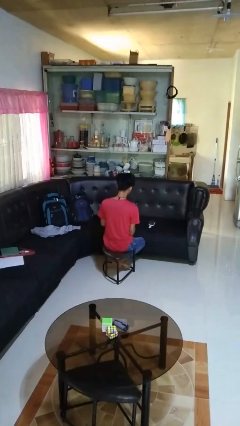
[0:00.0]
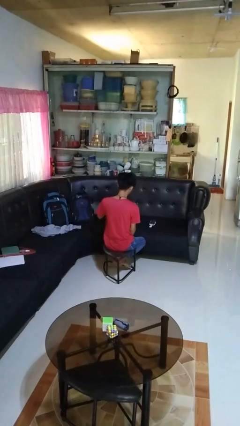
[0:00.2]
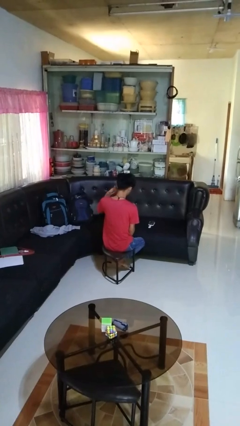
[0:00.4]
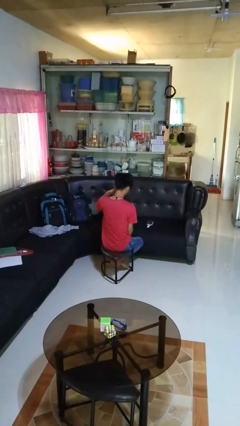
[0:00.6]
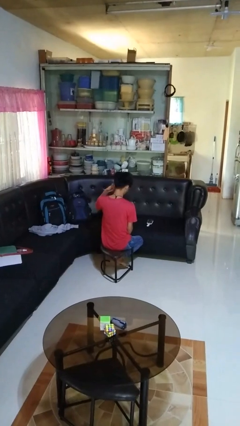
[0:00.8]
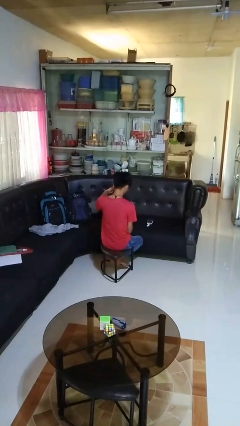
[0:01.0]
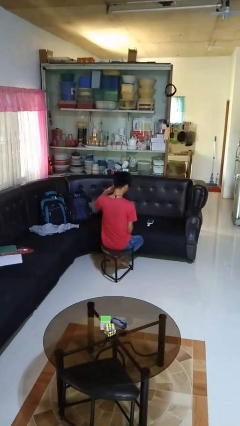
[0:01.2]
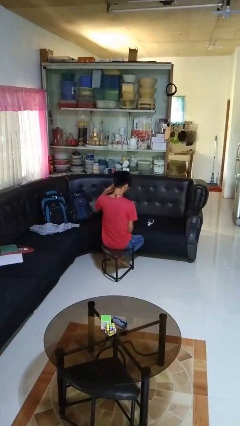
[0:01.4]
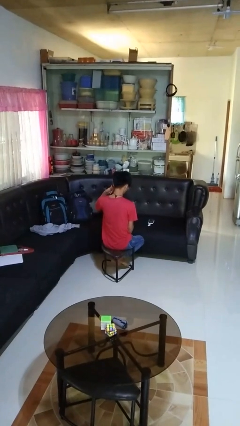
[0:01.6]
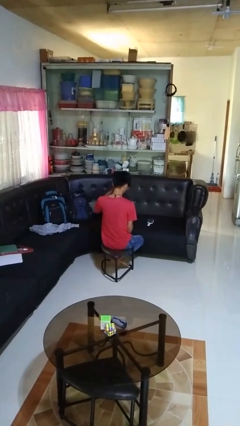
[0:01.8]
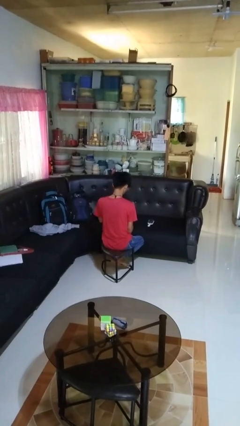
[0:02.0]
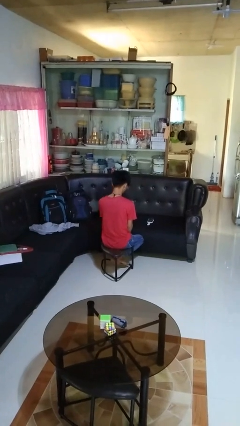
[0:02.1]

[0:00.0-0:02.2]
person gestures call me

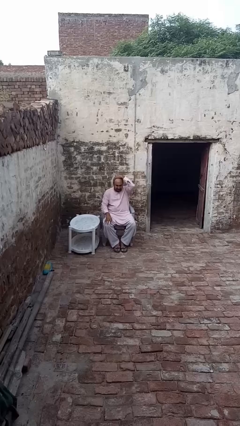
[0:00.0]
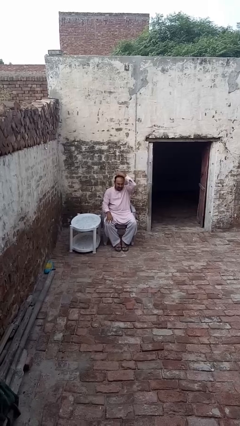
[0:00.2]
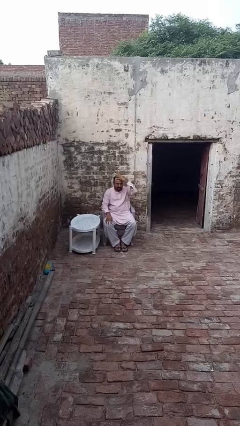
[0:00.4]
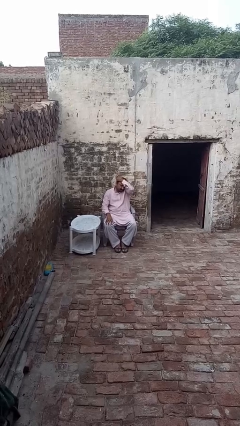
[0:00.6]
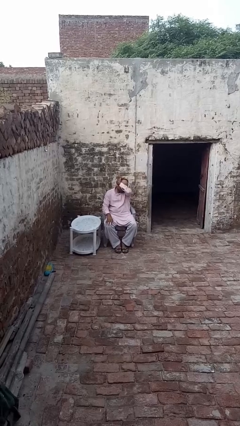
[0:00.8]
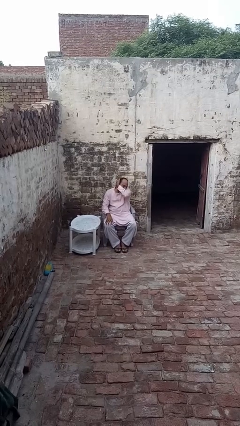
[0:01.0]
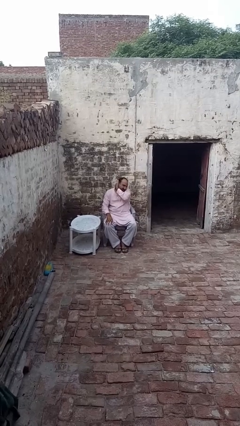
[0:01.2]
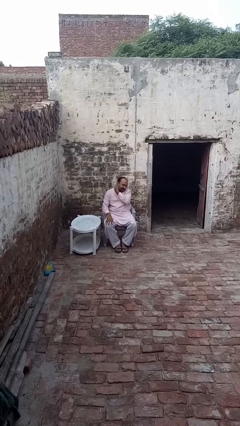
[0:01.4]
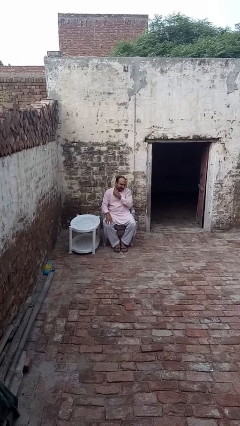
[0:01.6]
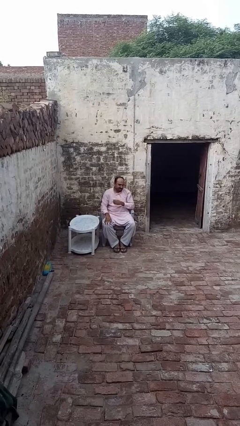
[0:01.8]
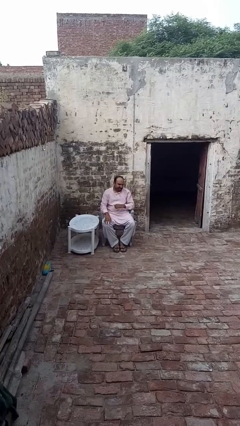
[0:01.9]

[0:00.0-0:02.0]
person strokes hair

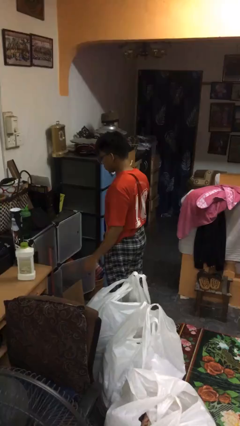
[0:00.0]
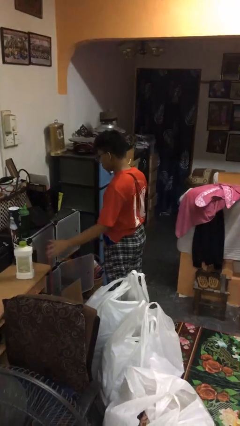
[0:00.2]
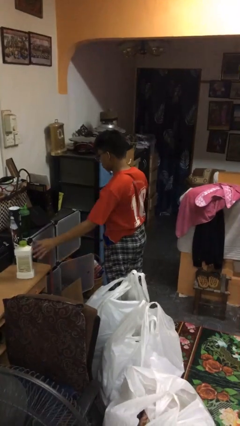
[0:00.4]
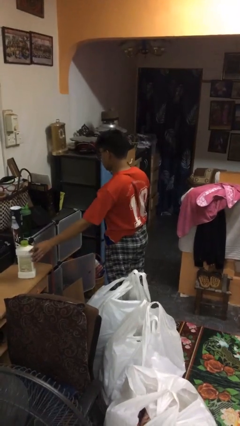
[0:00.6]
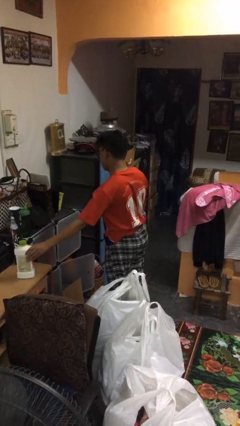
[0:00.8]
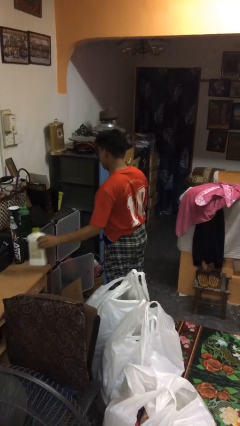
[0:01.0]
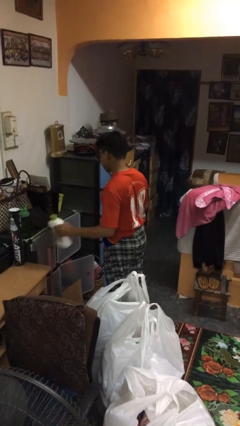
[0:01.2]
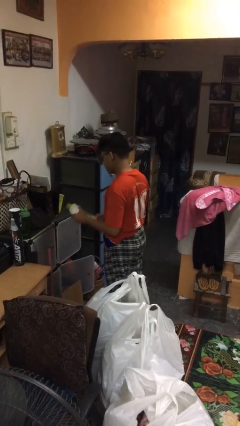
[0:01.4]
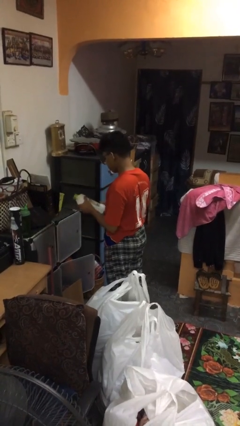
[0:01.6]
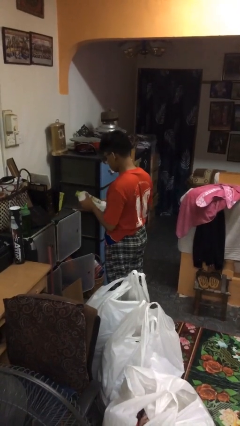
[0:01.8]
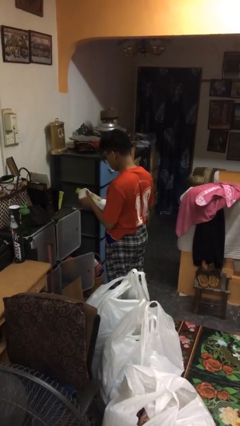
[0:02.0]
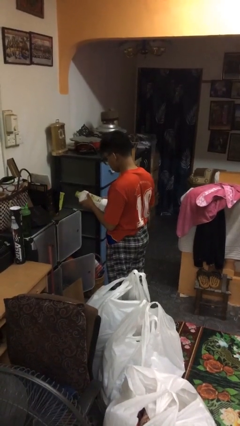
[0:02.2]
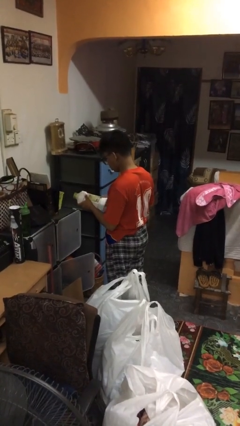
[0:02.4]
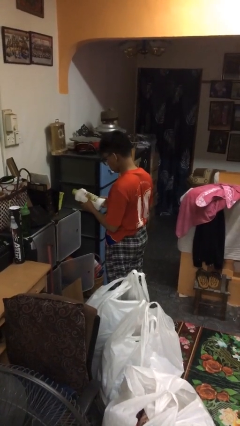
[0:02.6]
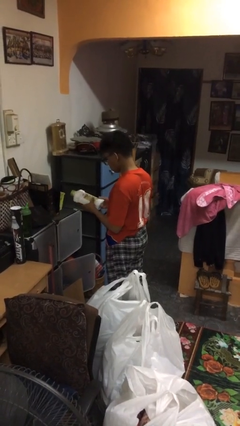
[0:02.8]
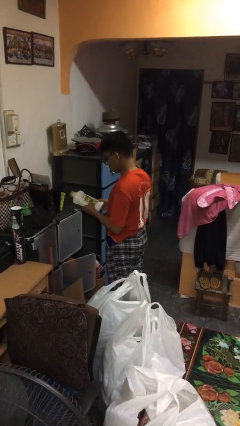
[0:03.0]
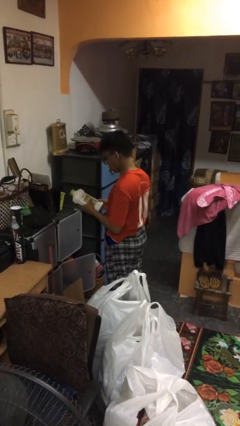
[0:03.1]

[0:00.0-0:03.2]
person picks up object from countertop

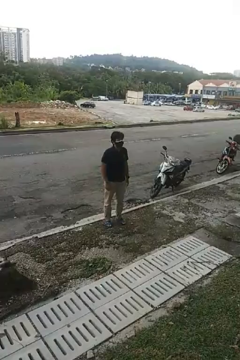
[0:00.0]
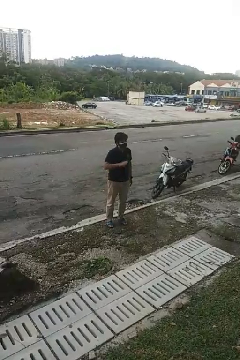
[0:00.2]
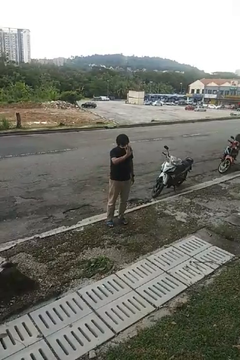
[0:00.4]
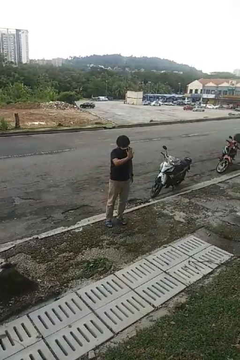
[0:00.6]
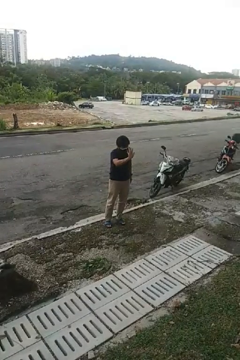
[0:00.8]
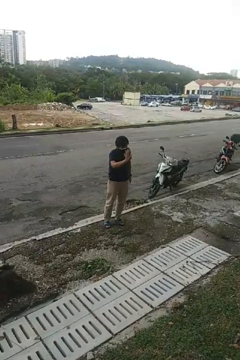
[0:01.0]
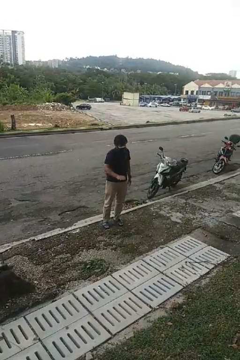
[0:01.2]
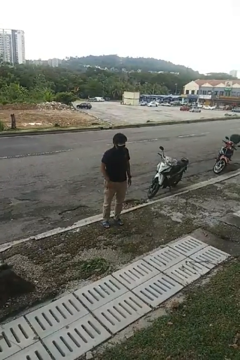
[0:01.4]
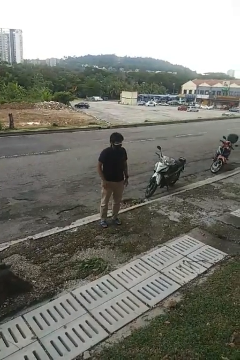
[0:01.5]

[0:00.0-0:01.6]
person gestures stop

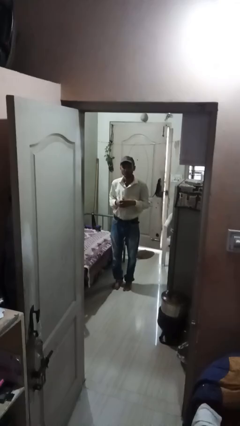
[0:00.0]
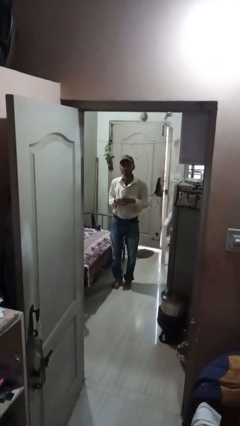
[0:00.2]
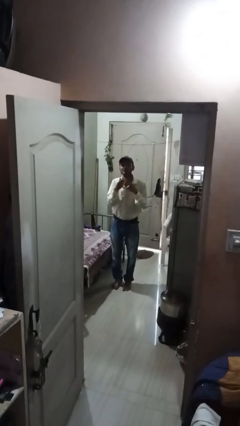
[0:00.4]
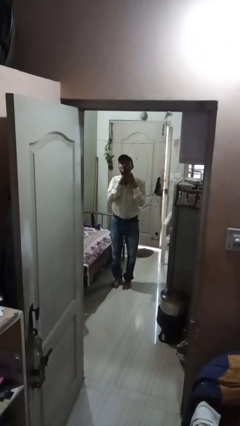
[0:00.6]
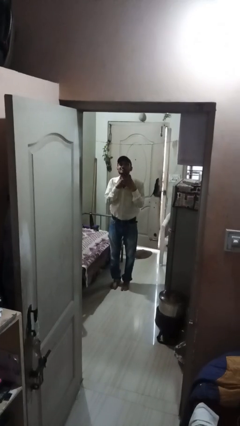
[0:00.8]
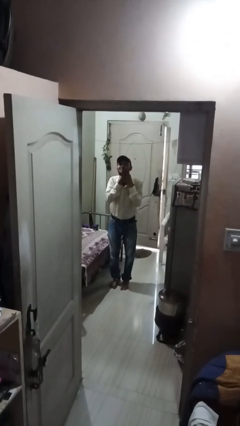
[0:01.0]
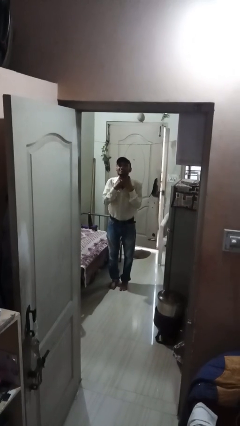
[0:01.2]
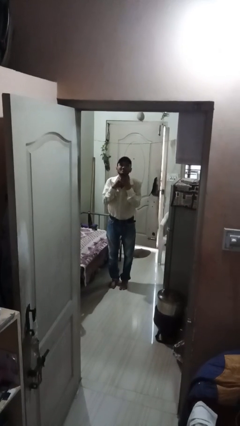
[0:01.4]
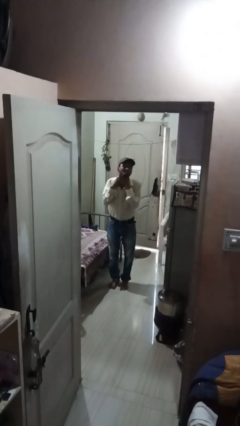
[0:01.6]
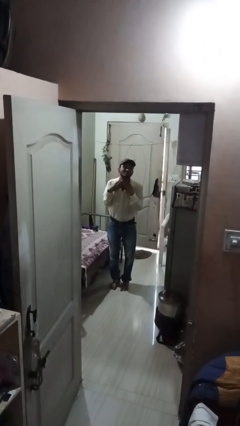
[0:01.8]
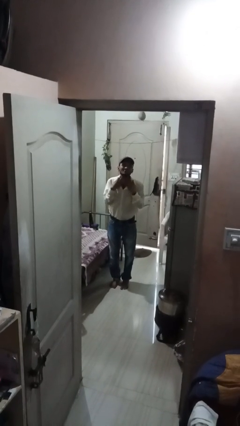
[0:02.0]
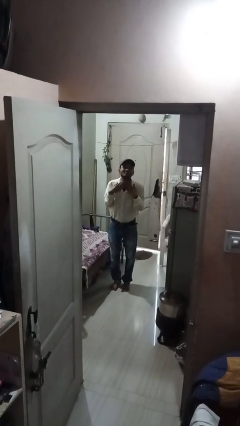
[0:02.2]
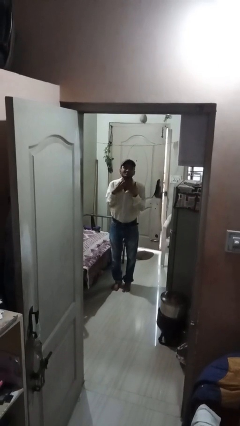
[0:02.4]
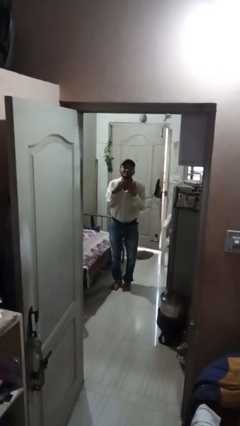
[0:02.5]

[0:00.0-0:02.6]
person rubs neck

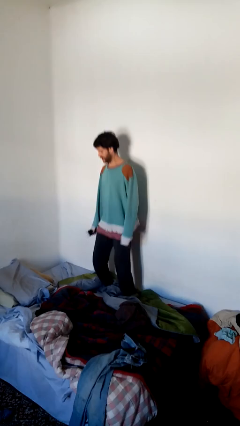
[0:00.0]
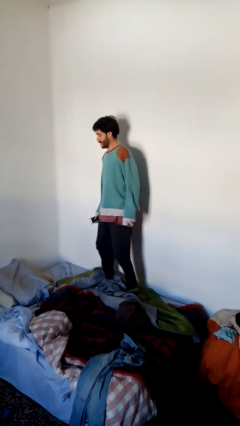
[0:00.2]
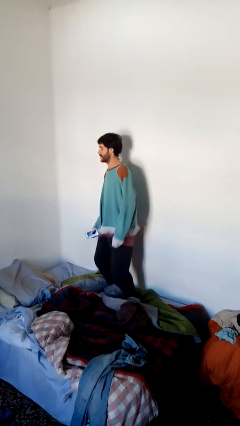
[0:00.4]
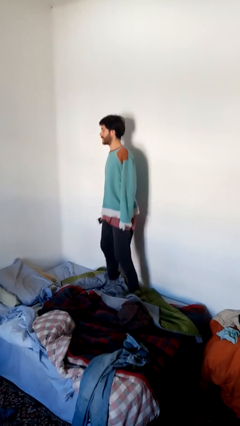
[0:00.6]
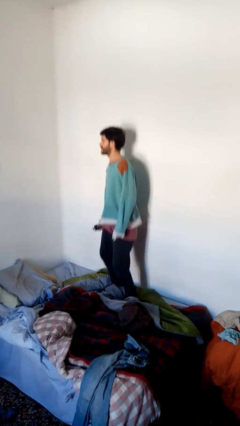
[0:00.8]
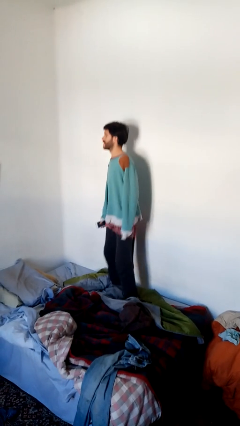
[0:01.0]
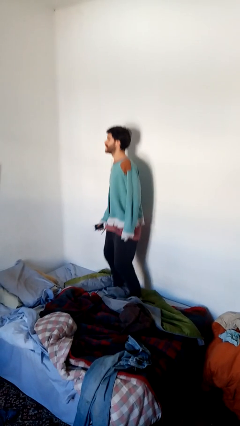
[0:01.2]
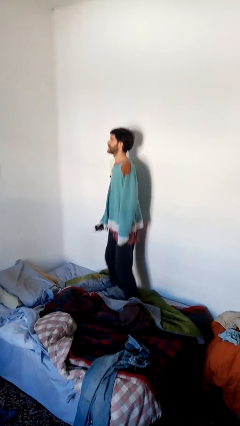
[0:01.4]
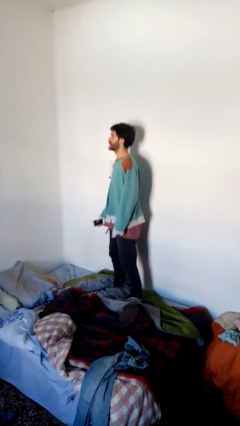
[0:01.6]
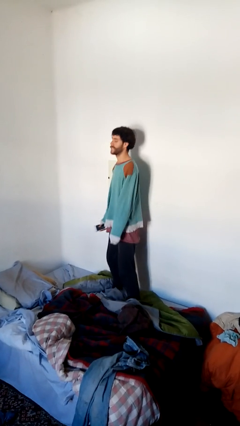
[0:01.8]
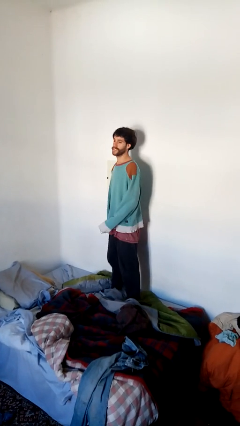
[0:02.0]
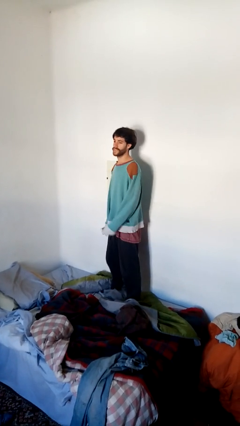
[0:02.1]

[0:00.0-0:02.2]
person jumps on bed

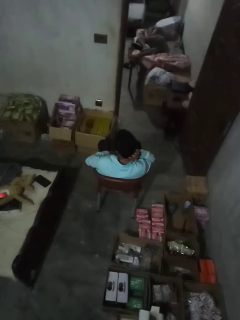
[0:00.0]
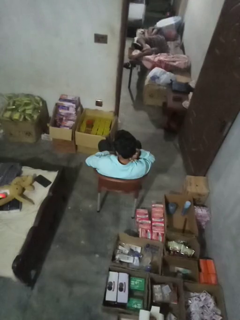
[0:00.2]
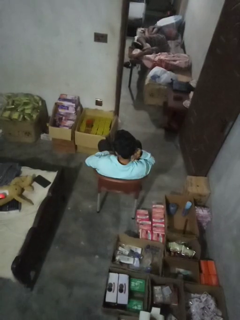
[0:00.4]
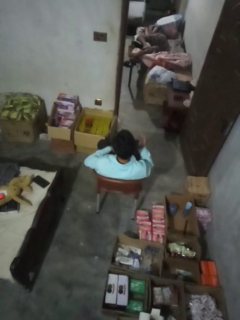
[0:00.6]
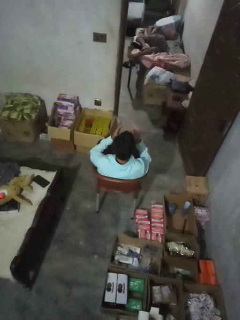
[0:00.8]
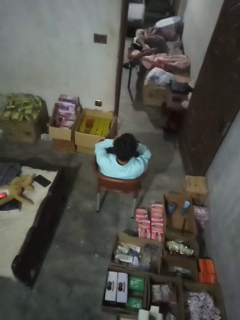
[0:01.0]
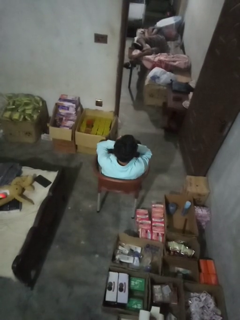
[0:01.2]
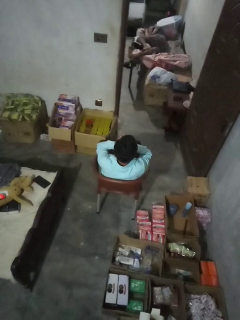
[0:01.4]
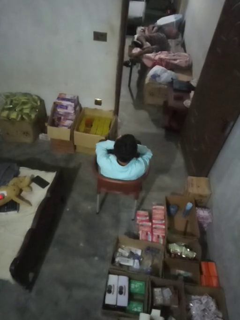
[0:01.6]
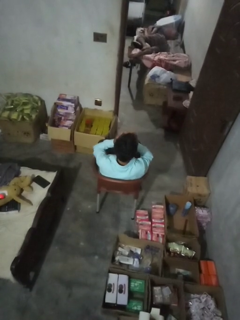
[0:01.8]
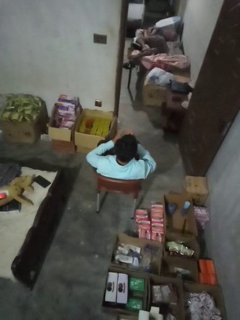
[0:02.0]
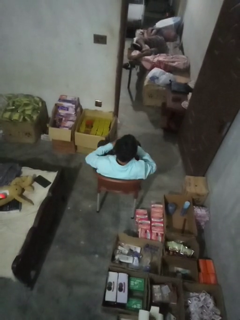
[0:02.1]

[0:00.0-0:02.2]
person covers face with hands

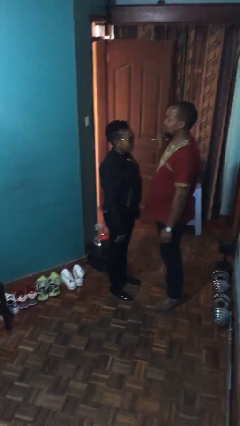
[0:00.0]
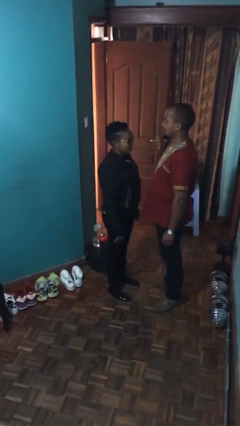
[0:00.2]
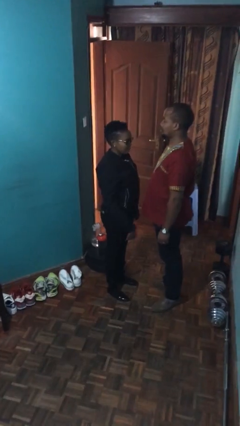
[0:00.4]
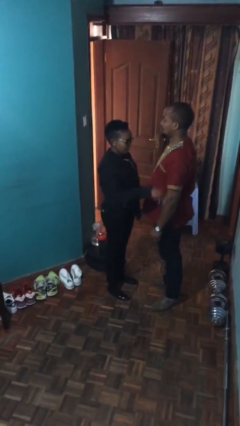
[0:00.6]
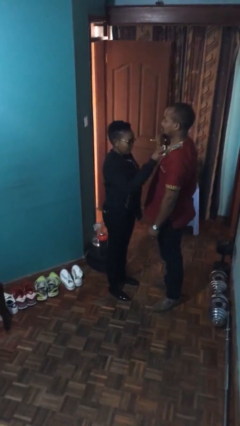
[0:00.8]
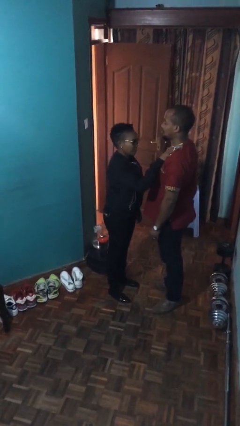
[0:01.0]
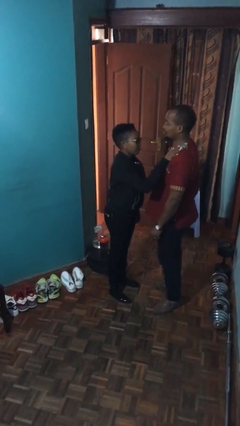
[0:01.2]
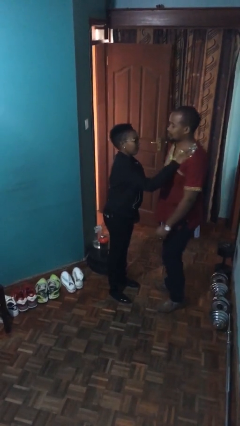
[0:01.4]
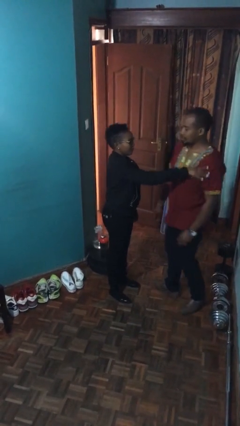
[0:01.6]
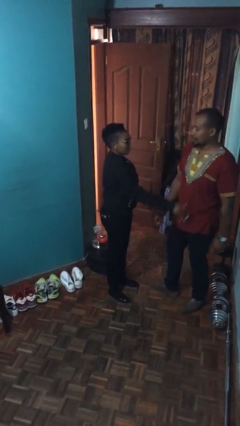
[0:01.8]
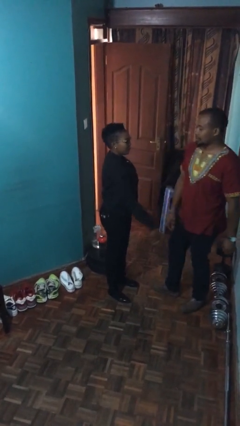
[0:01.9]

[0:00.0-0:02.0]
person shoves person

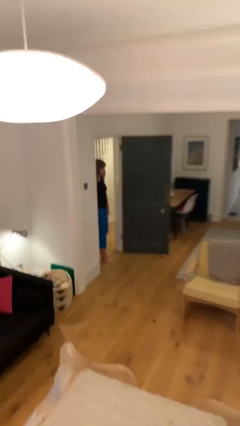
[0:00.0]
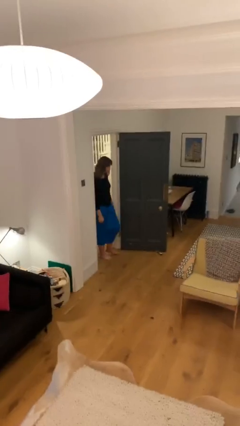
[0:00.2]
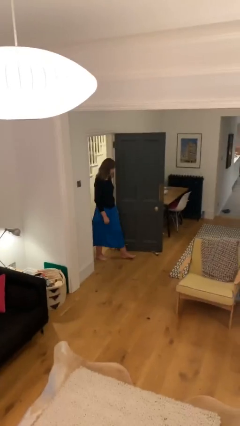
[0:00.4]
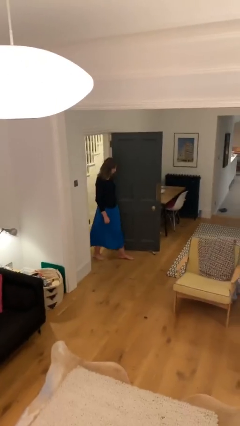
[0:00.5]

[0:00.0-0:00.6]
person enters scene through structure
